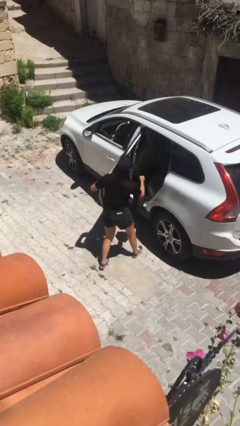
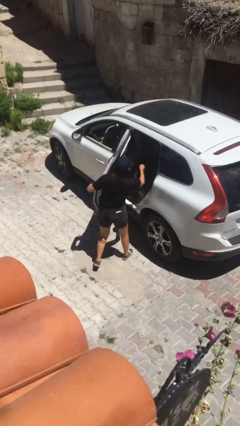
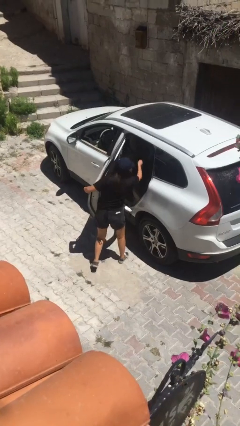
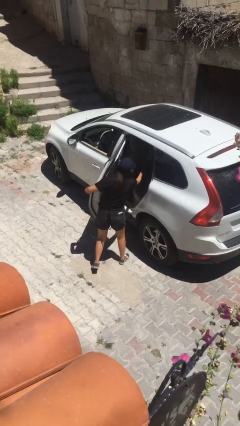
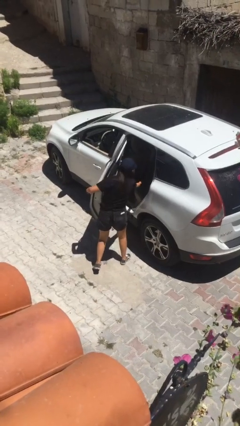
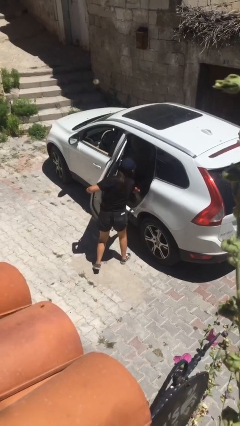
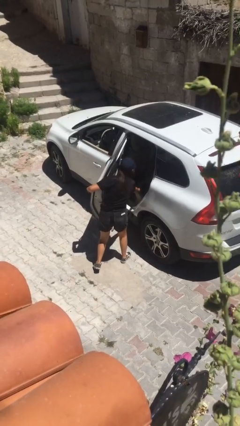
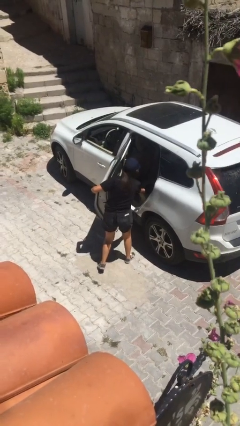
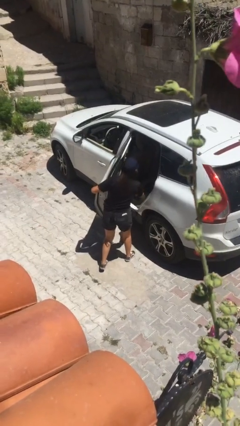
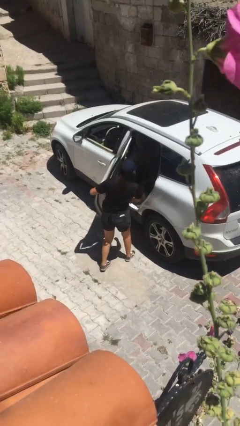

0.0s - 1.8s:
person unloads car

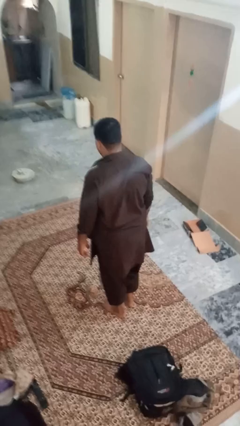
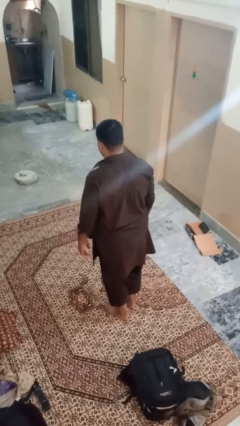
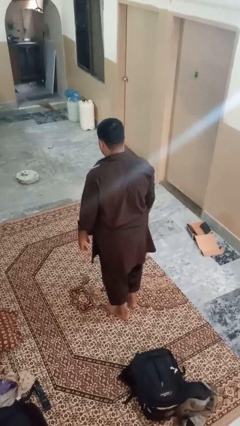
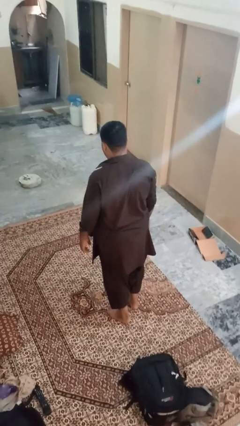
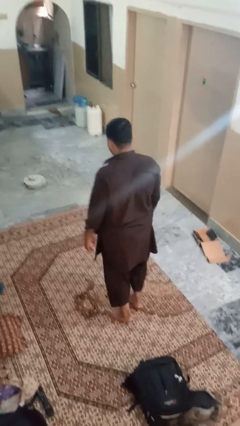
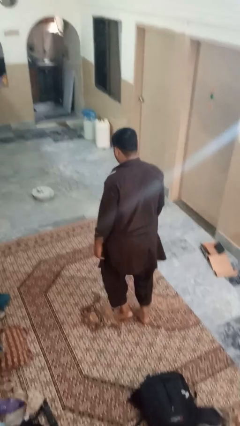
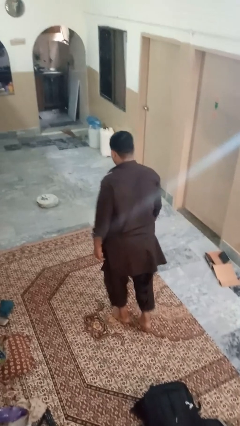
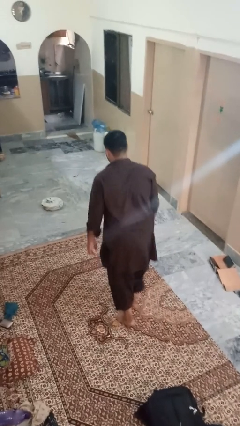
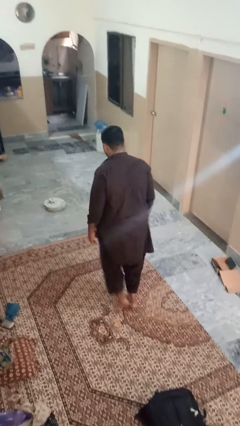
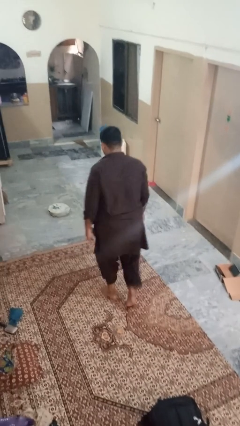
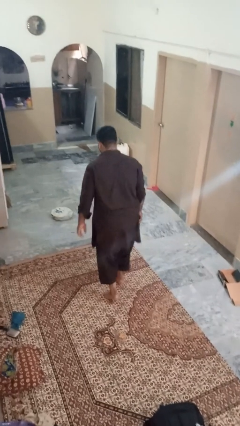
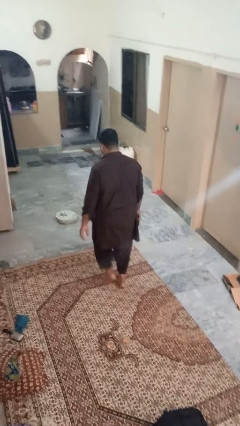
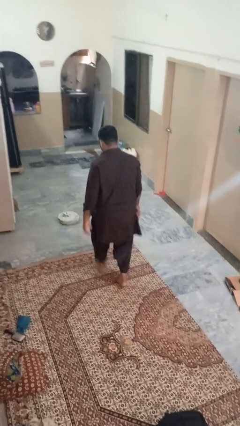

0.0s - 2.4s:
person walks tiptoe

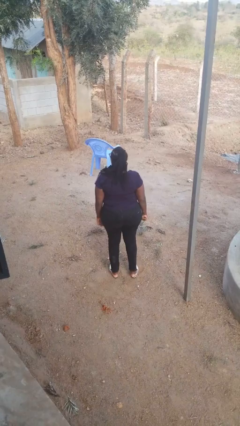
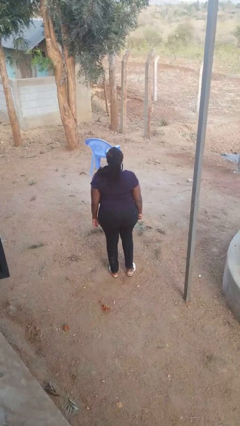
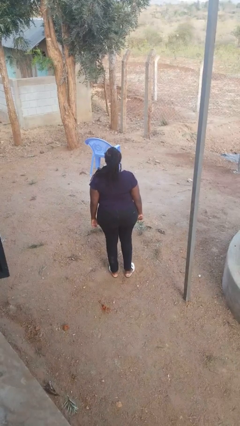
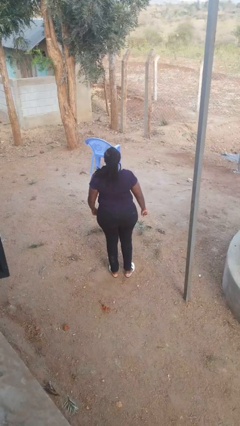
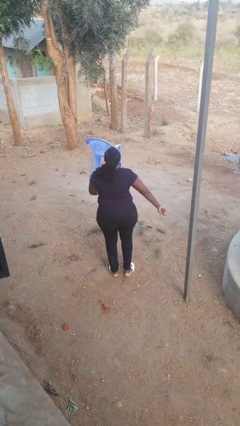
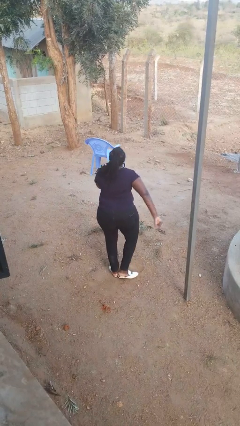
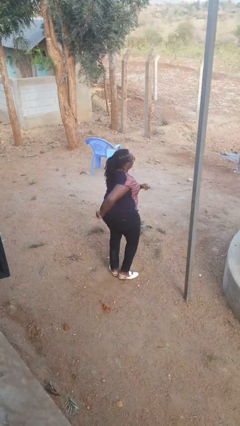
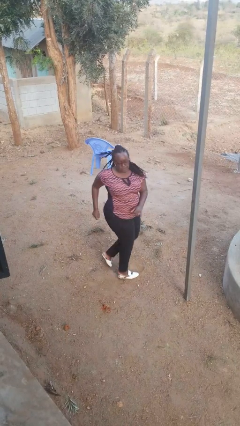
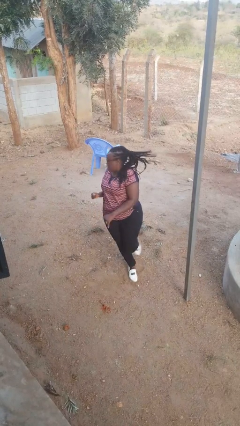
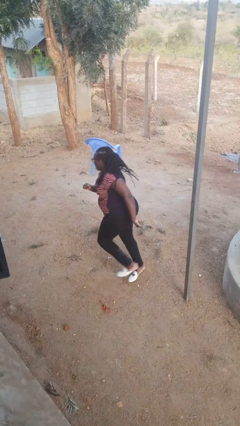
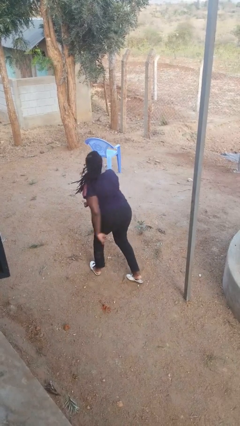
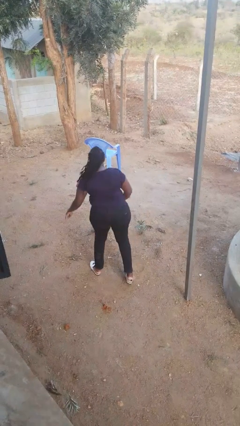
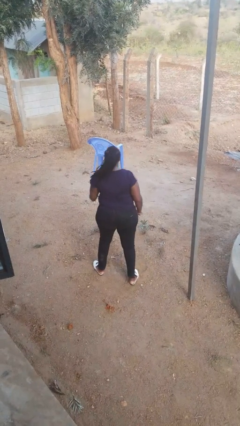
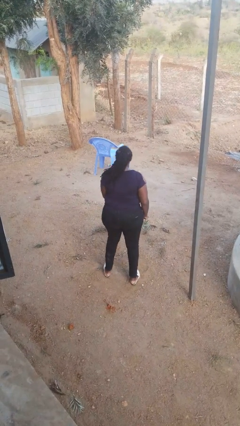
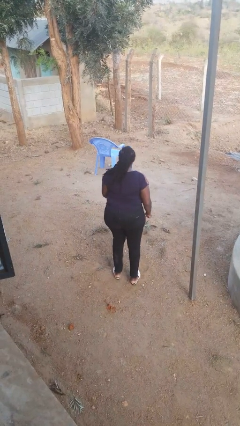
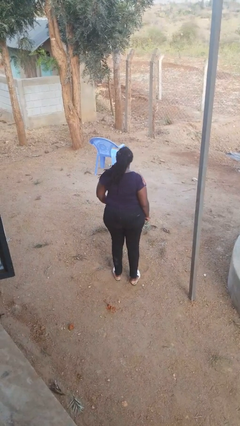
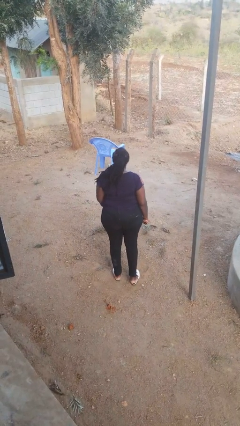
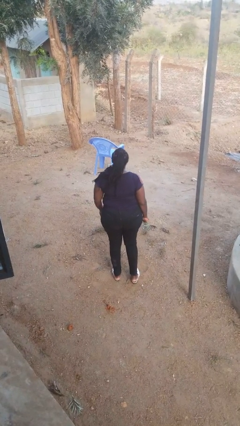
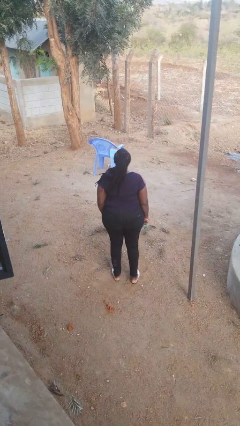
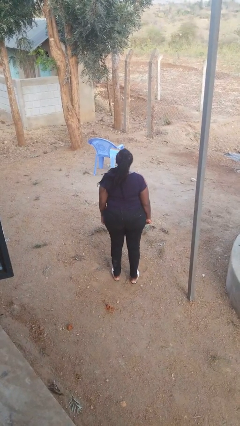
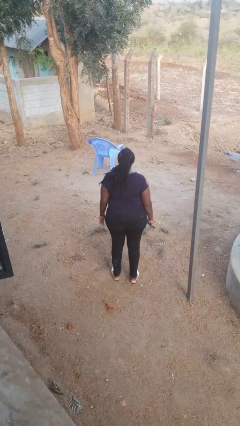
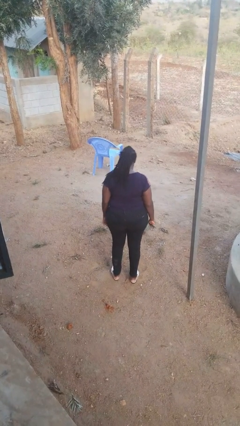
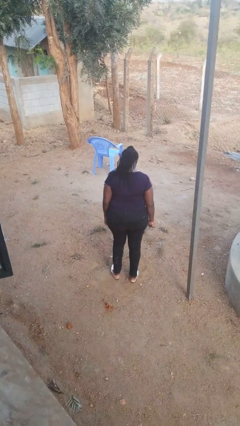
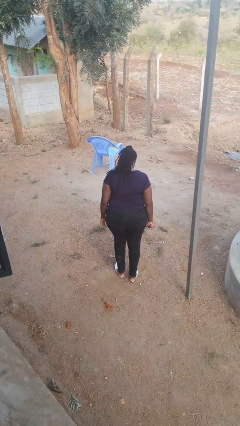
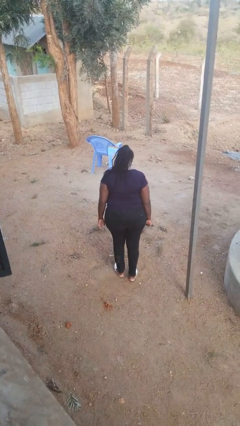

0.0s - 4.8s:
person twirls

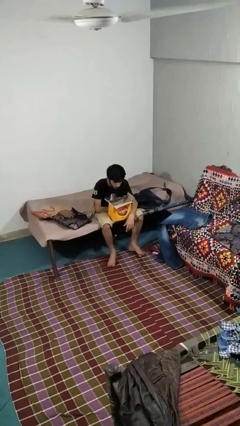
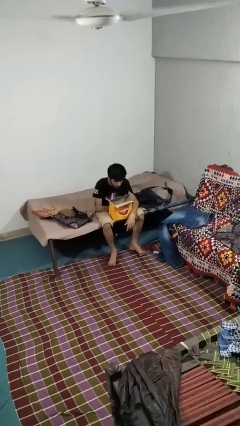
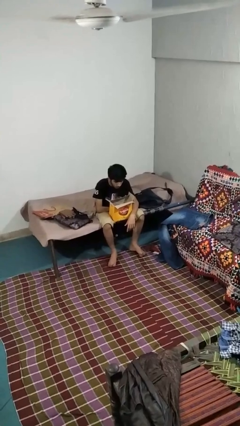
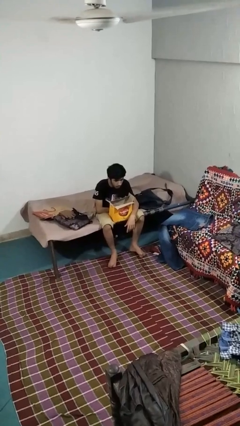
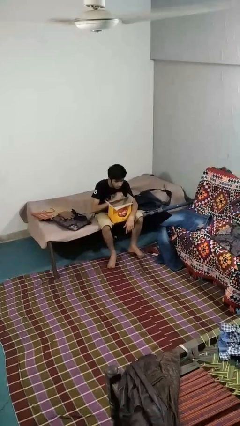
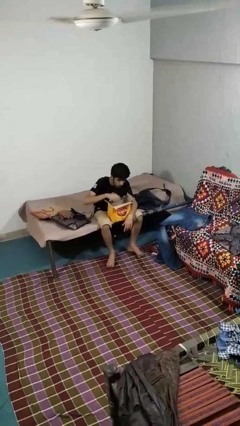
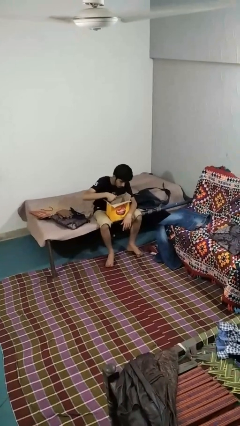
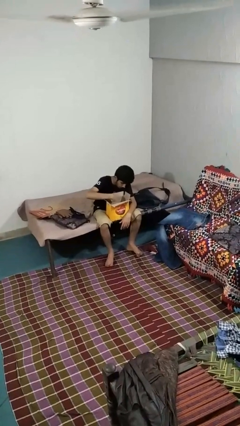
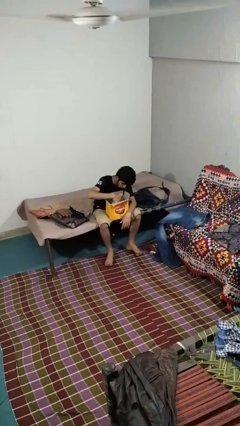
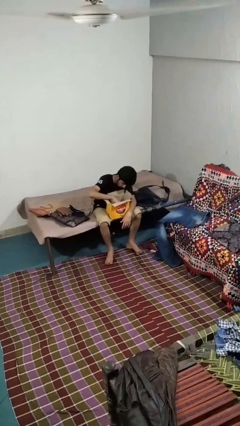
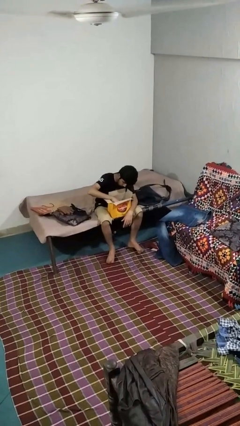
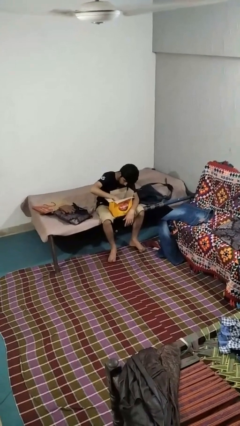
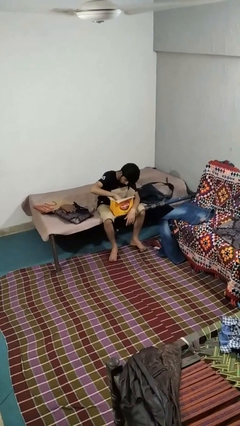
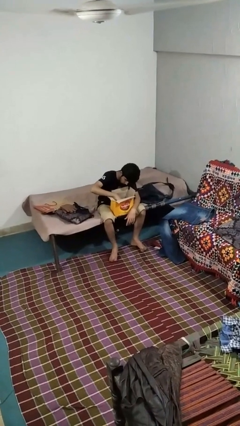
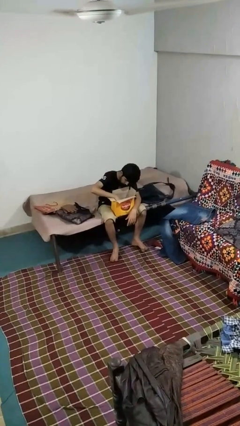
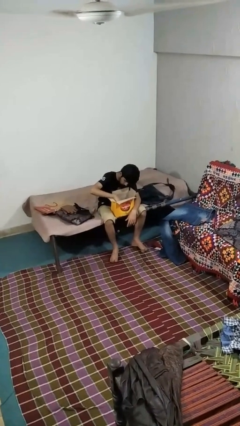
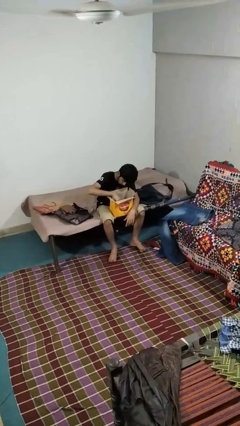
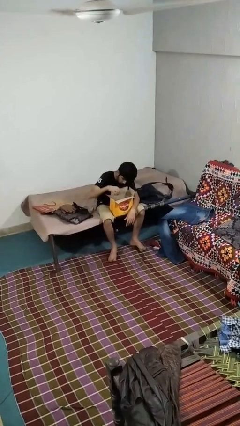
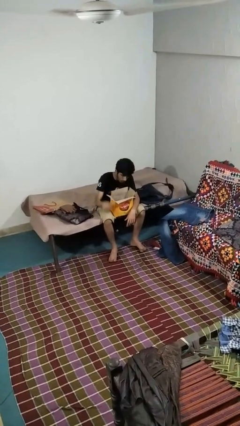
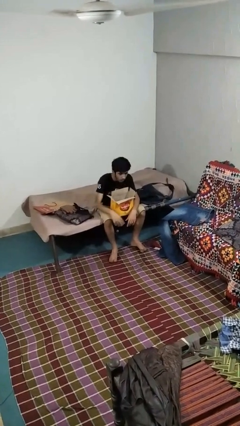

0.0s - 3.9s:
person searches in box

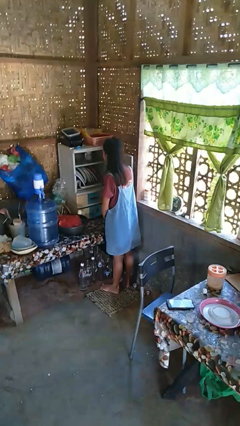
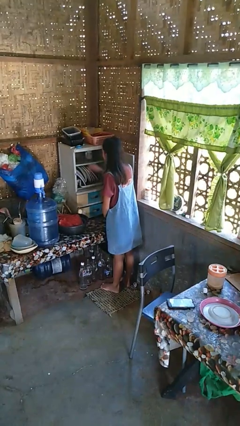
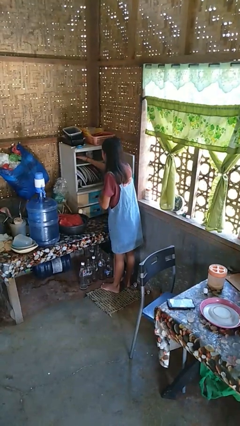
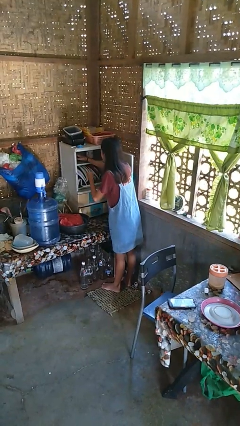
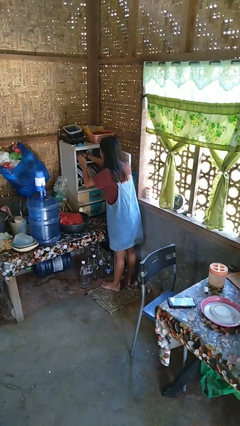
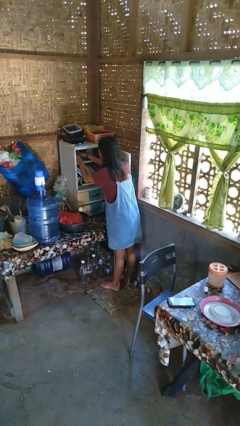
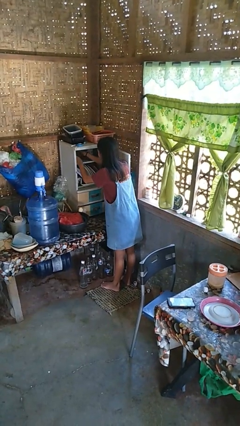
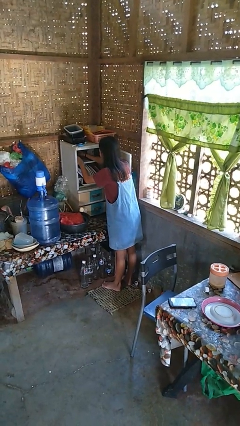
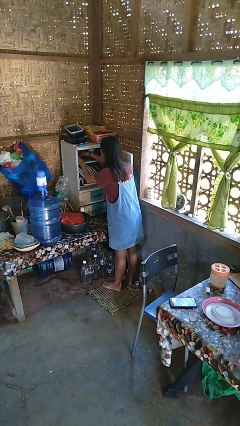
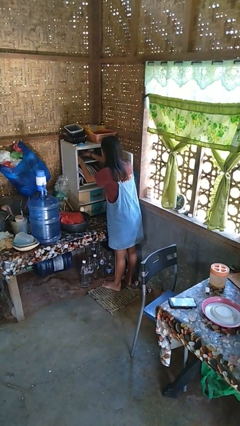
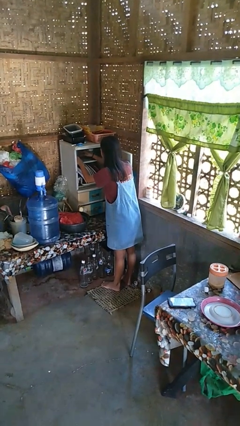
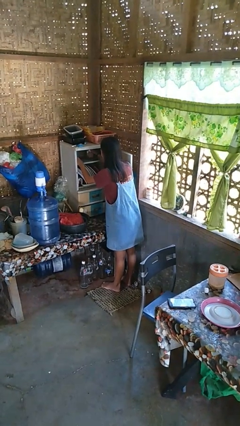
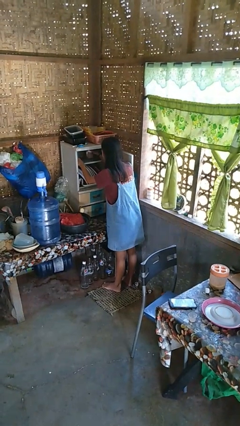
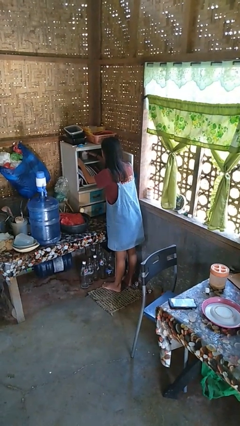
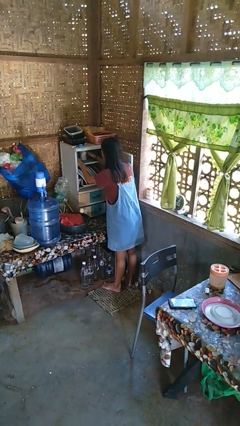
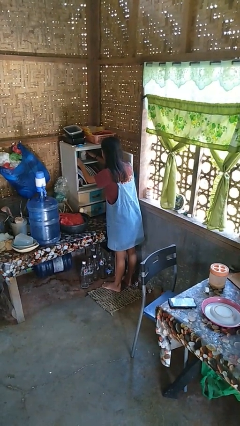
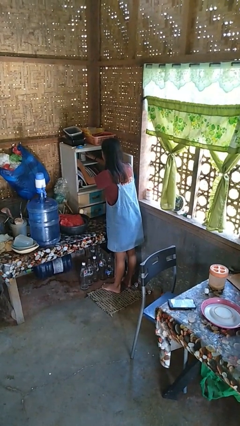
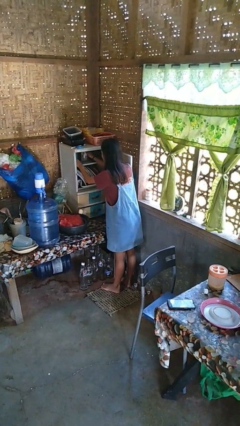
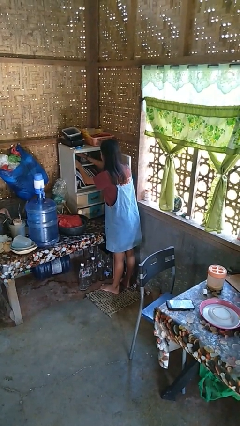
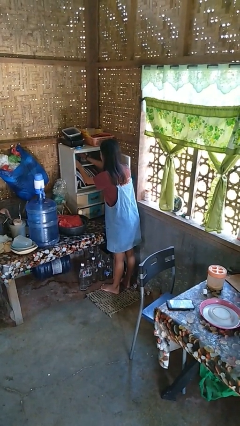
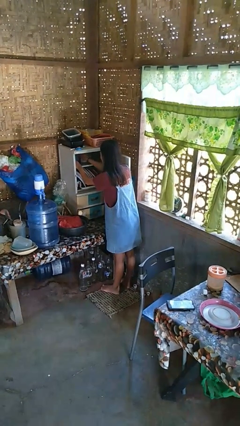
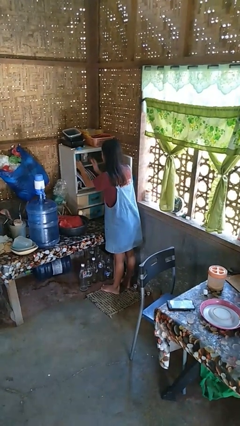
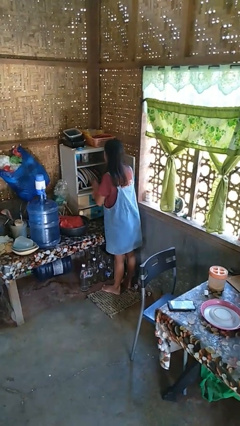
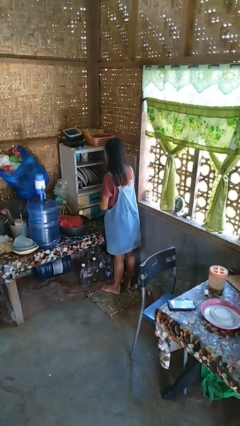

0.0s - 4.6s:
person searches in cabinet

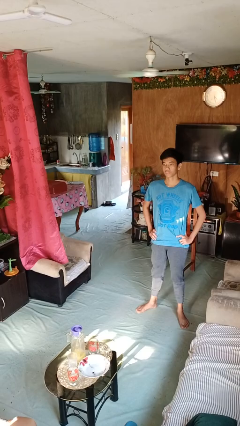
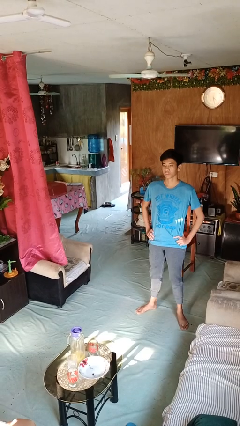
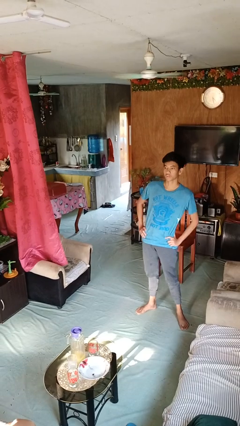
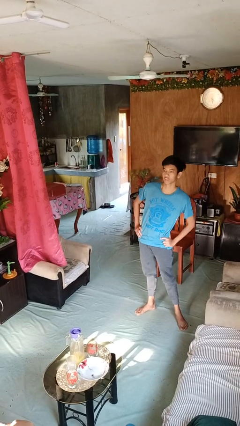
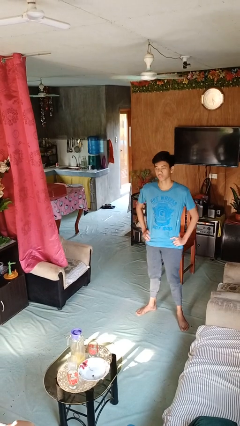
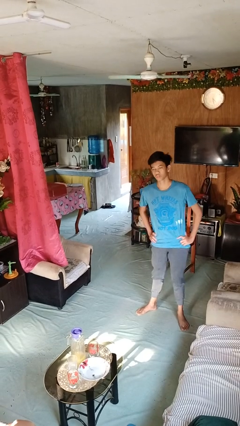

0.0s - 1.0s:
person wiggles hips
